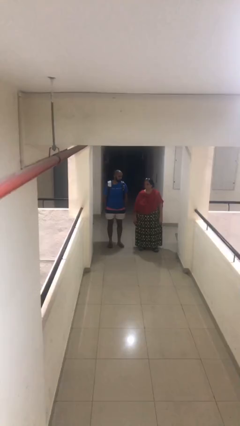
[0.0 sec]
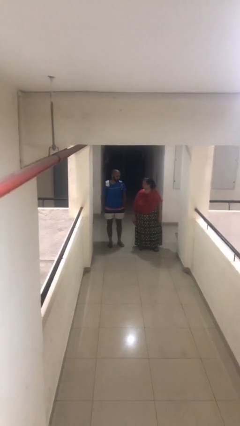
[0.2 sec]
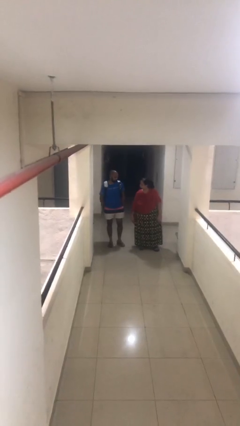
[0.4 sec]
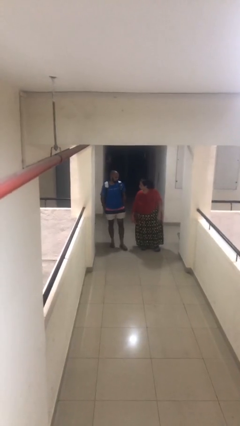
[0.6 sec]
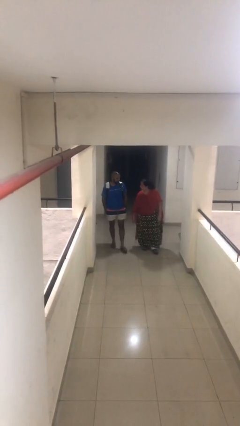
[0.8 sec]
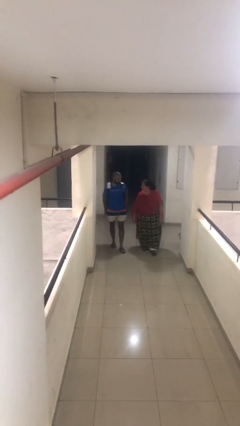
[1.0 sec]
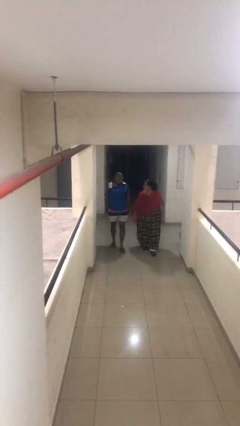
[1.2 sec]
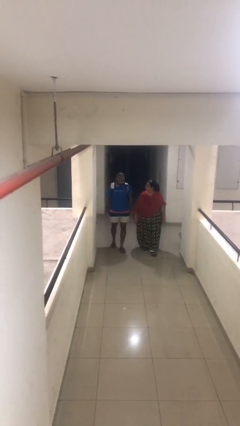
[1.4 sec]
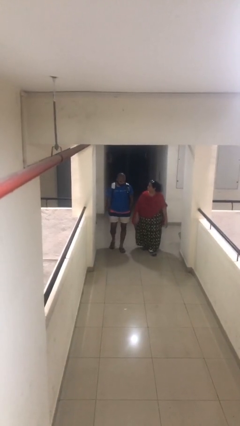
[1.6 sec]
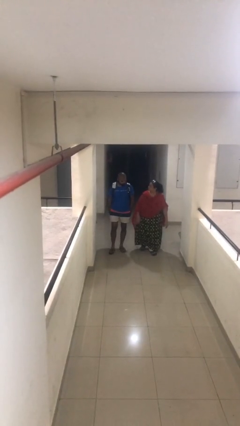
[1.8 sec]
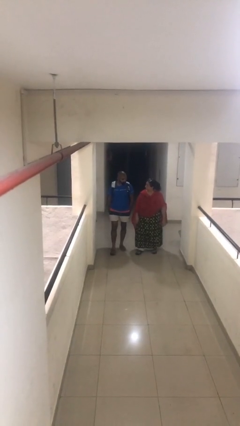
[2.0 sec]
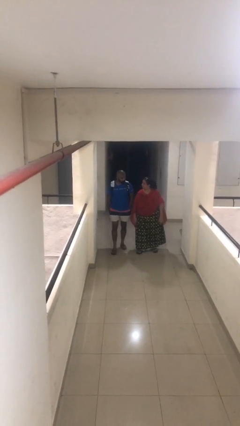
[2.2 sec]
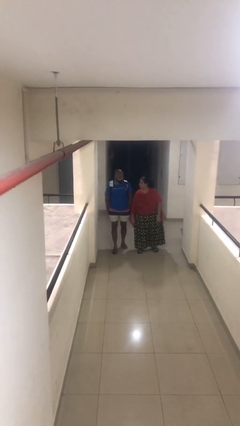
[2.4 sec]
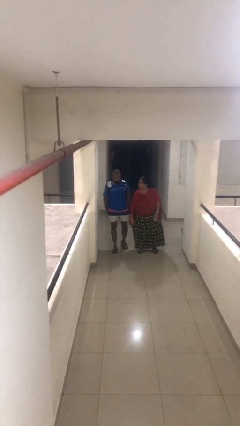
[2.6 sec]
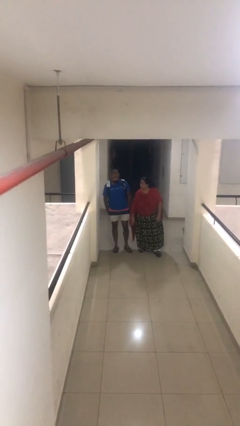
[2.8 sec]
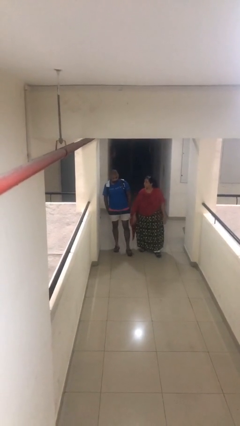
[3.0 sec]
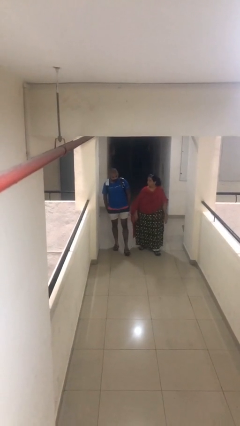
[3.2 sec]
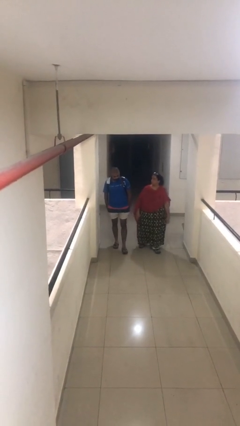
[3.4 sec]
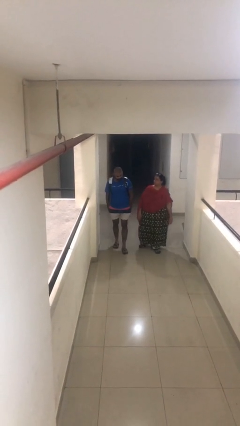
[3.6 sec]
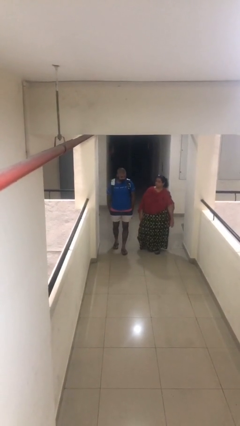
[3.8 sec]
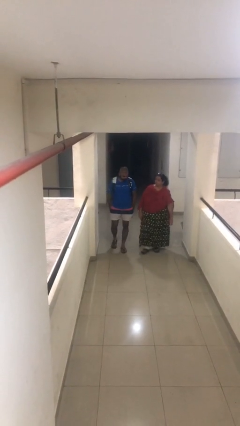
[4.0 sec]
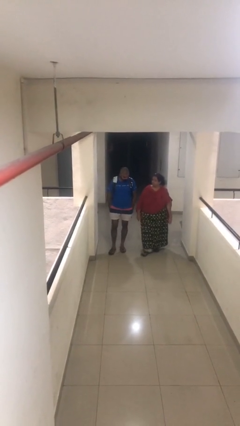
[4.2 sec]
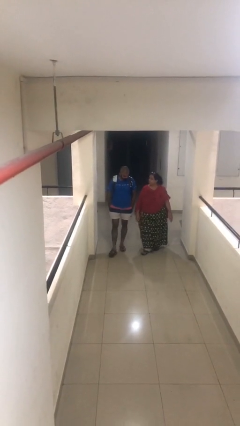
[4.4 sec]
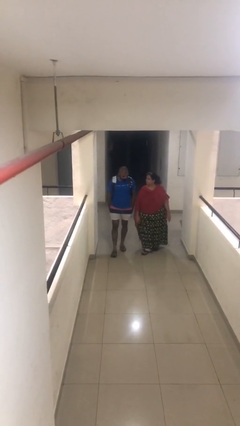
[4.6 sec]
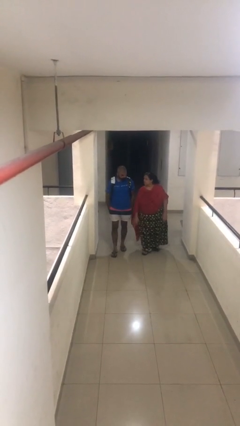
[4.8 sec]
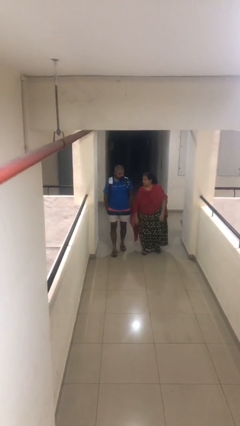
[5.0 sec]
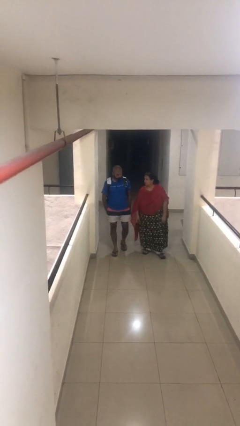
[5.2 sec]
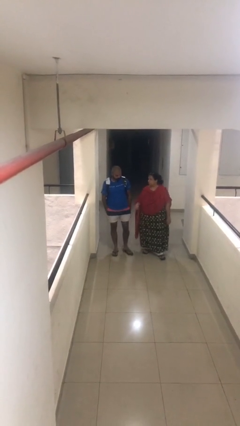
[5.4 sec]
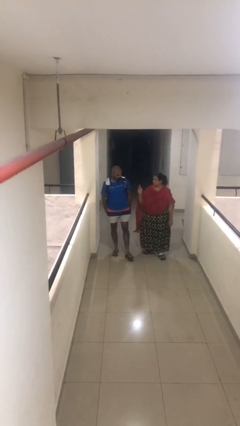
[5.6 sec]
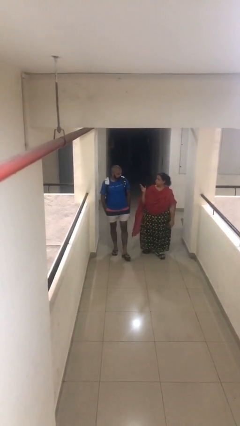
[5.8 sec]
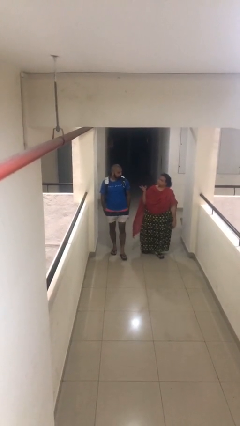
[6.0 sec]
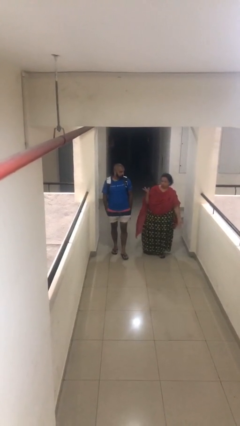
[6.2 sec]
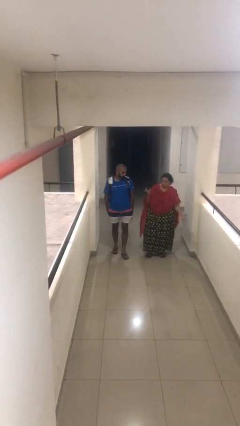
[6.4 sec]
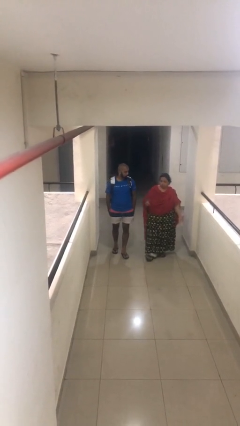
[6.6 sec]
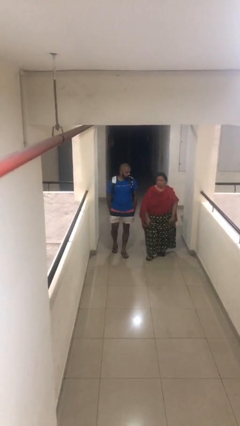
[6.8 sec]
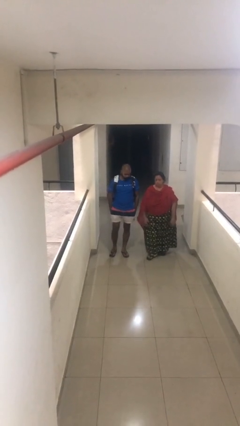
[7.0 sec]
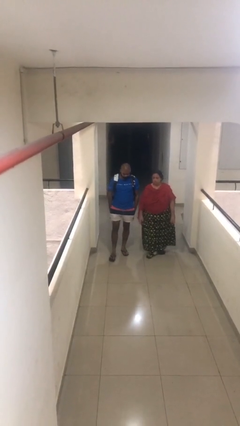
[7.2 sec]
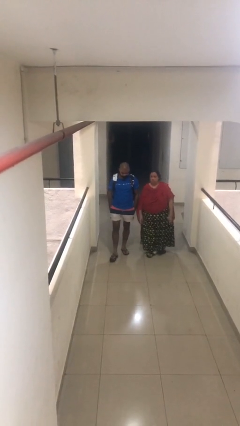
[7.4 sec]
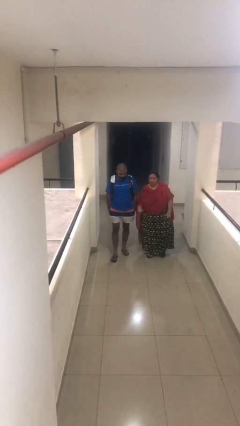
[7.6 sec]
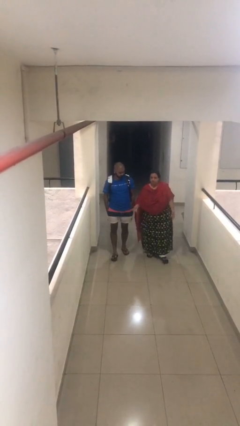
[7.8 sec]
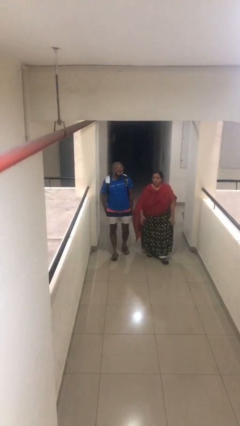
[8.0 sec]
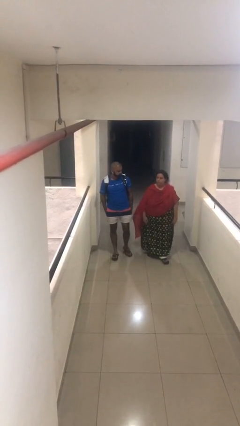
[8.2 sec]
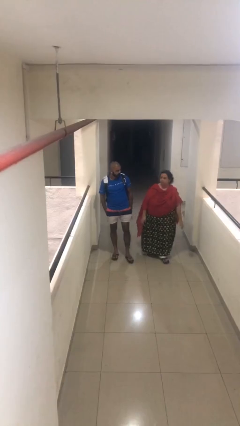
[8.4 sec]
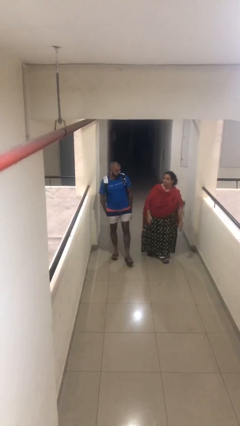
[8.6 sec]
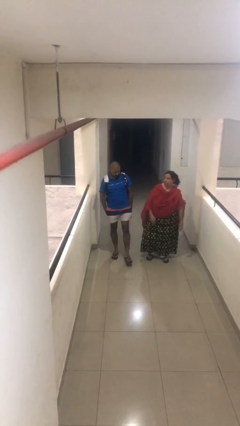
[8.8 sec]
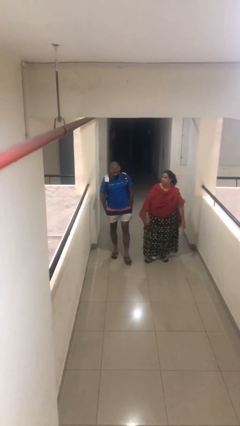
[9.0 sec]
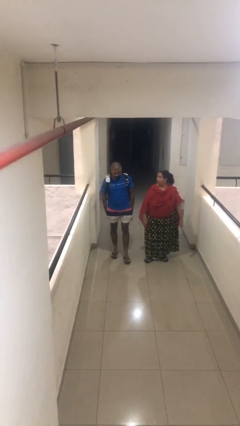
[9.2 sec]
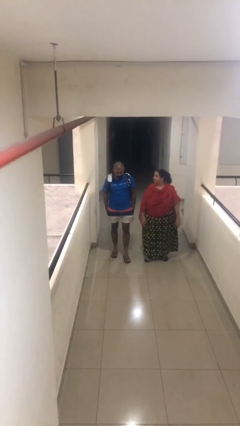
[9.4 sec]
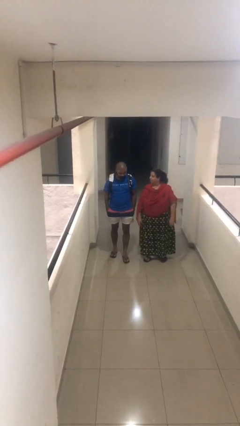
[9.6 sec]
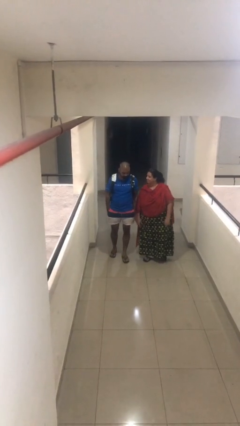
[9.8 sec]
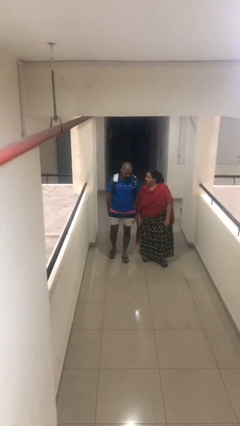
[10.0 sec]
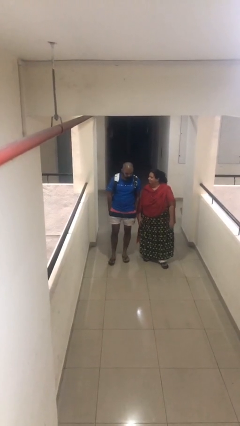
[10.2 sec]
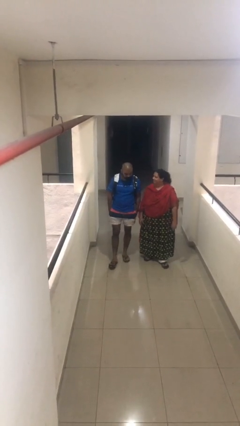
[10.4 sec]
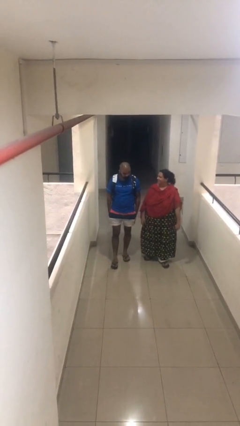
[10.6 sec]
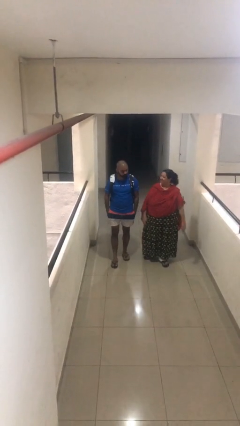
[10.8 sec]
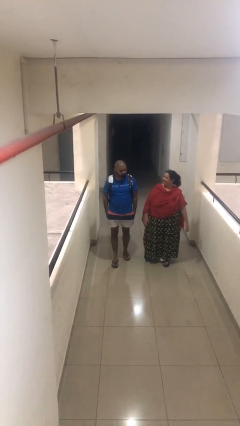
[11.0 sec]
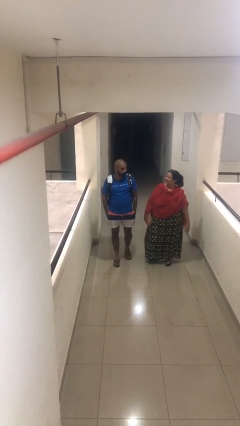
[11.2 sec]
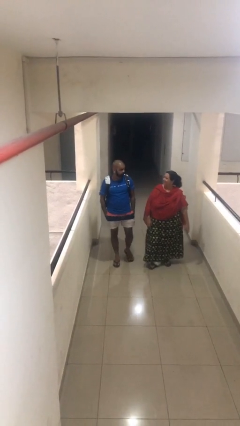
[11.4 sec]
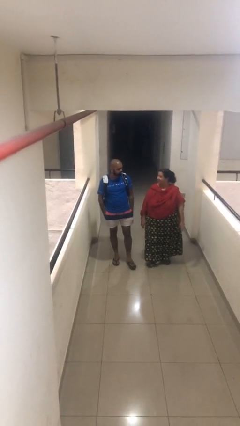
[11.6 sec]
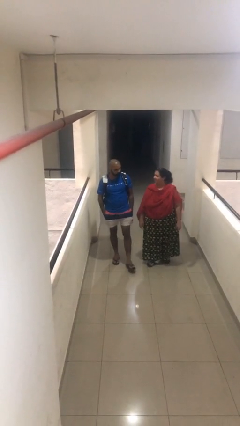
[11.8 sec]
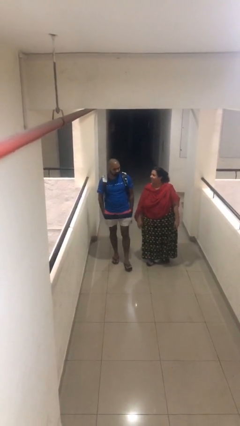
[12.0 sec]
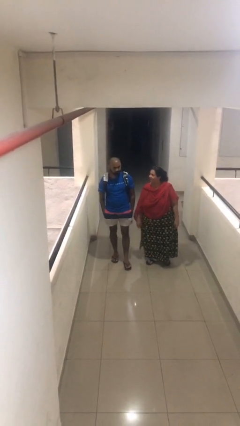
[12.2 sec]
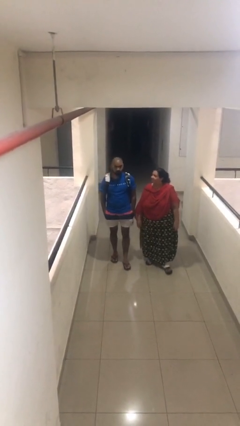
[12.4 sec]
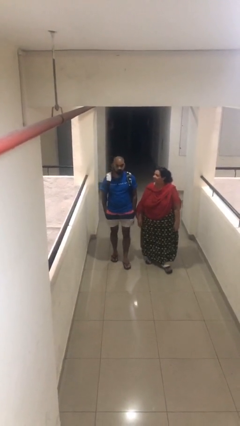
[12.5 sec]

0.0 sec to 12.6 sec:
person talks to person

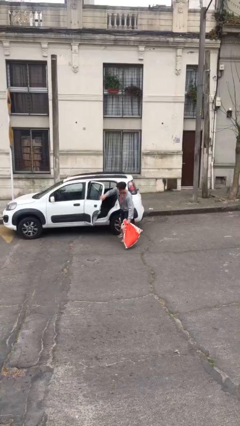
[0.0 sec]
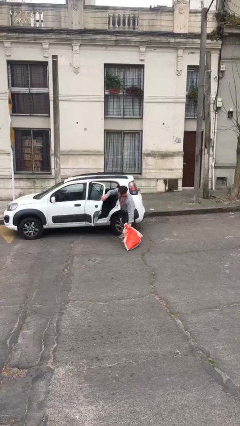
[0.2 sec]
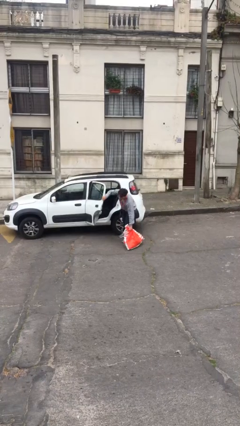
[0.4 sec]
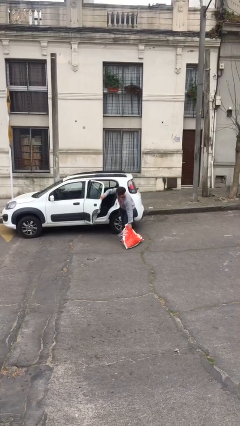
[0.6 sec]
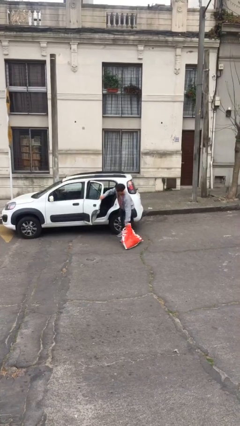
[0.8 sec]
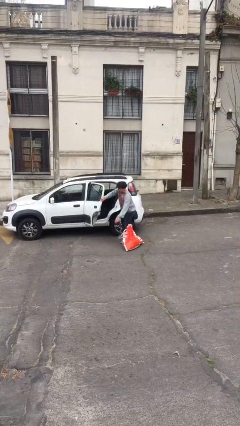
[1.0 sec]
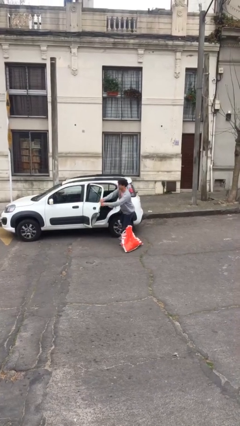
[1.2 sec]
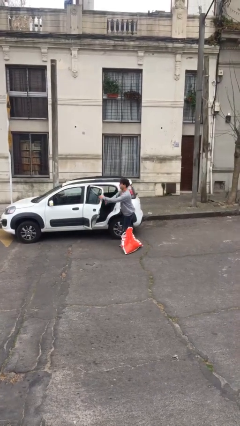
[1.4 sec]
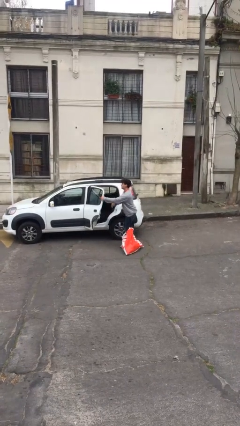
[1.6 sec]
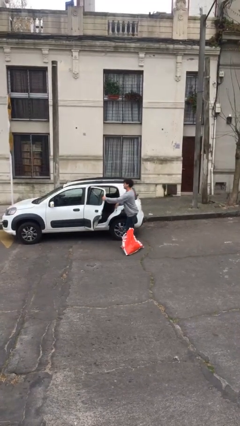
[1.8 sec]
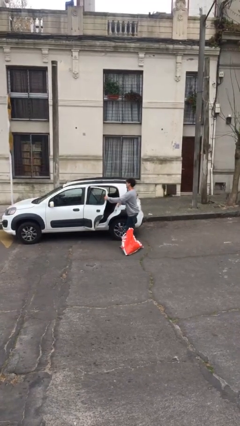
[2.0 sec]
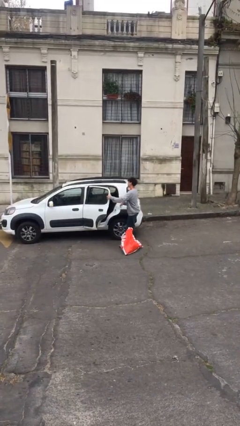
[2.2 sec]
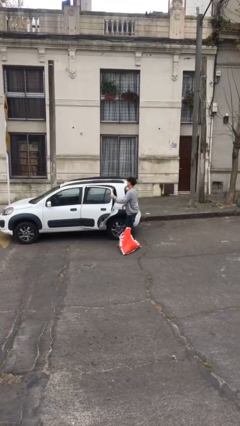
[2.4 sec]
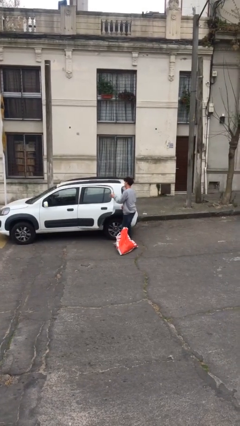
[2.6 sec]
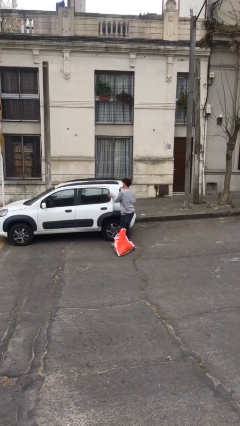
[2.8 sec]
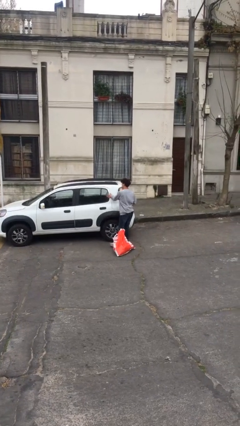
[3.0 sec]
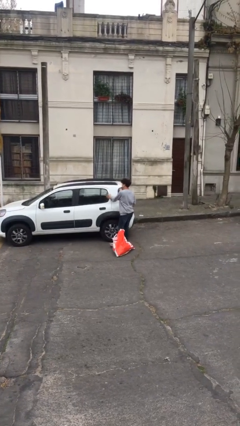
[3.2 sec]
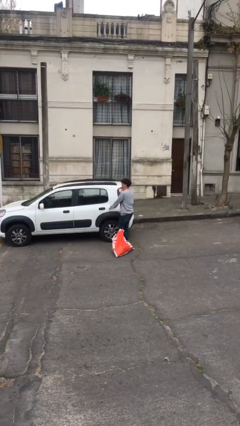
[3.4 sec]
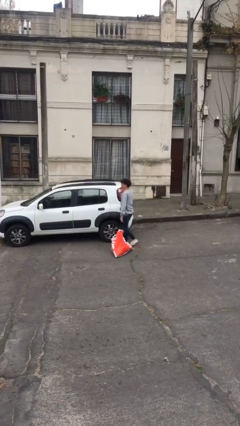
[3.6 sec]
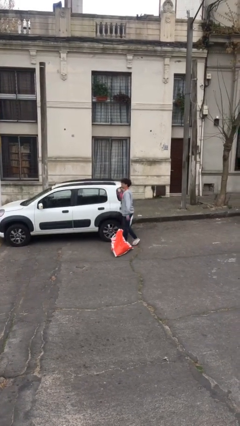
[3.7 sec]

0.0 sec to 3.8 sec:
person closes car door

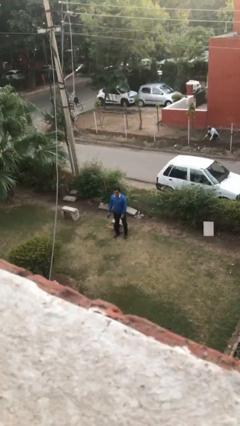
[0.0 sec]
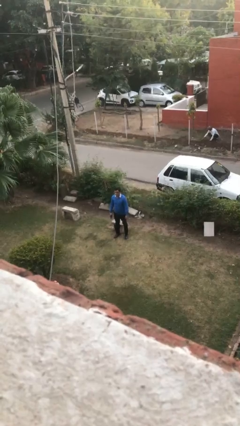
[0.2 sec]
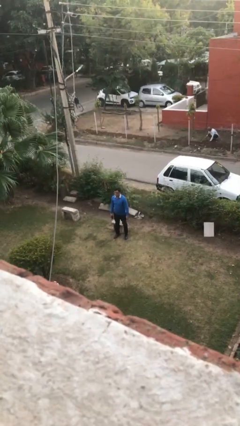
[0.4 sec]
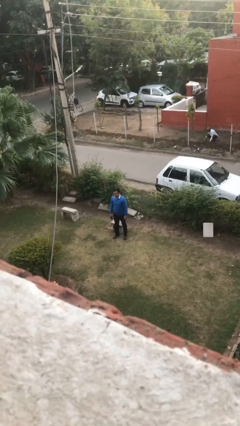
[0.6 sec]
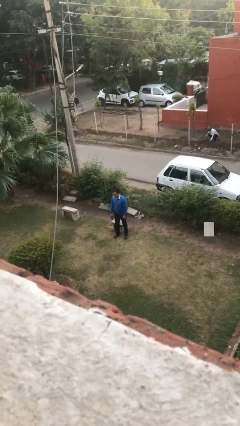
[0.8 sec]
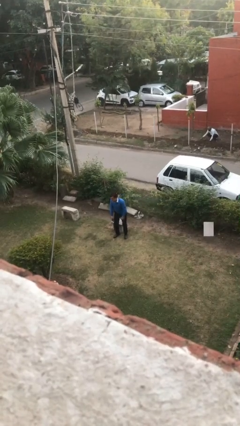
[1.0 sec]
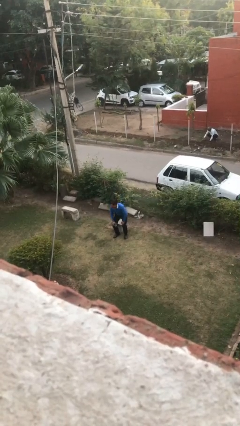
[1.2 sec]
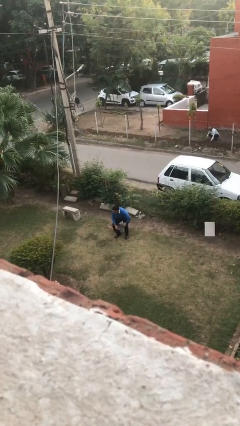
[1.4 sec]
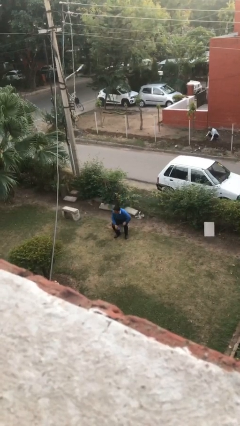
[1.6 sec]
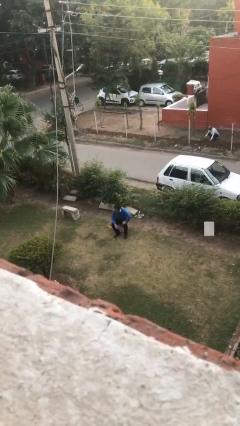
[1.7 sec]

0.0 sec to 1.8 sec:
person sits down
